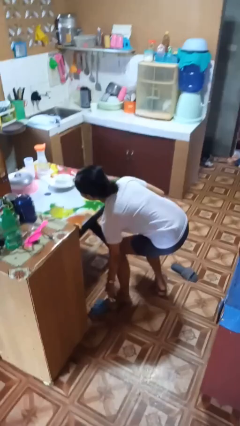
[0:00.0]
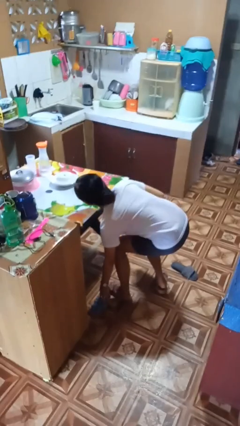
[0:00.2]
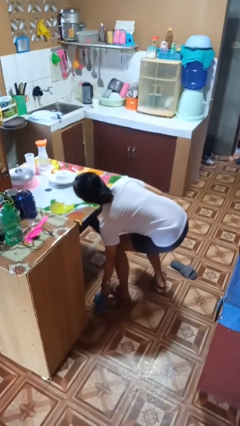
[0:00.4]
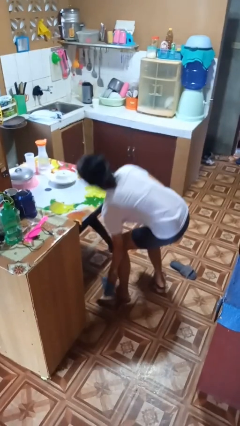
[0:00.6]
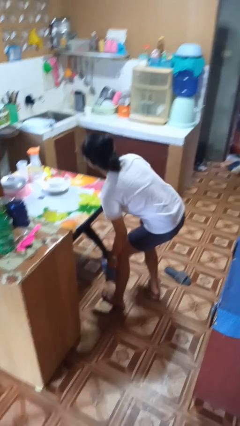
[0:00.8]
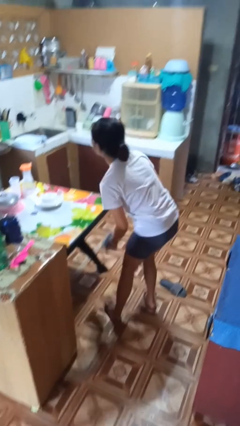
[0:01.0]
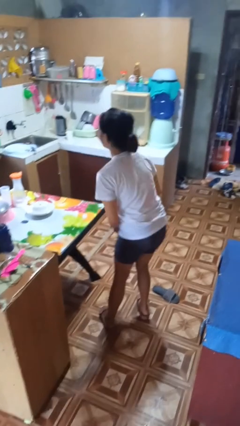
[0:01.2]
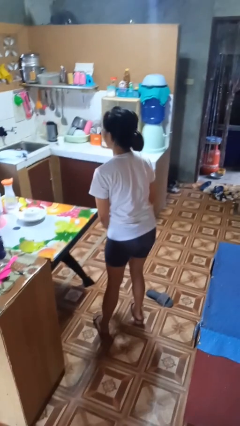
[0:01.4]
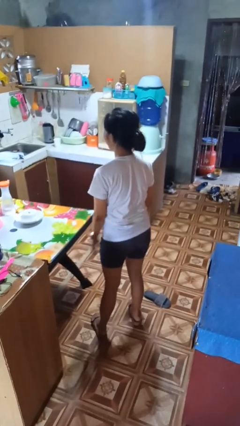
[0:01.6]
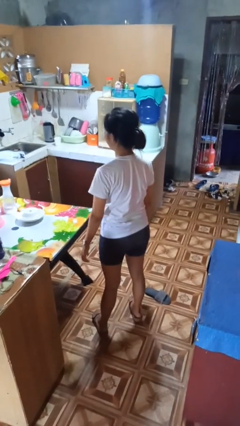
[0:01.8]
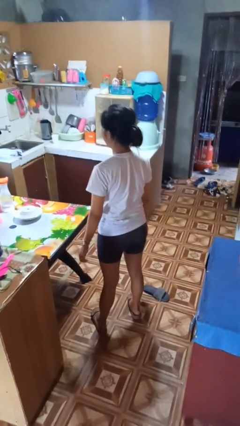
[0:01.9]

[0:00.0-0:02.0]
person picks up object from table

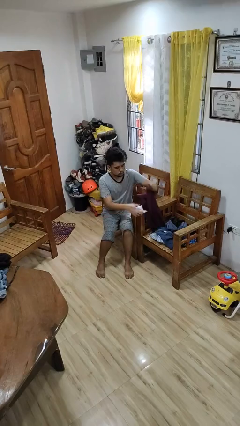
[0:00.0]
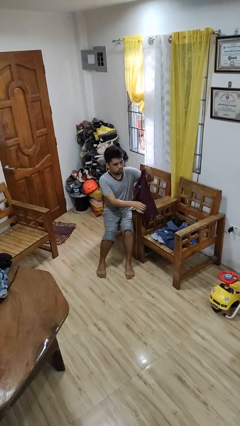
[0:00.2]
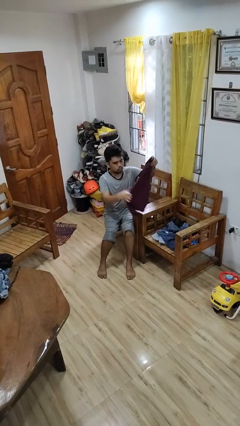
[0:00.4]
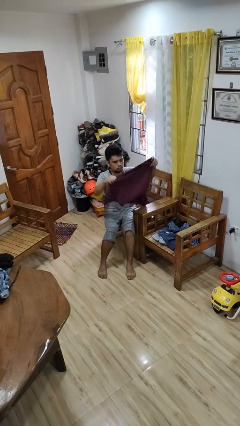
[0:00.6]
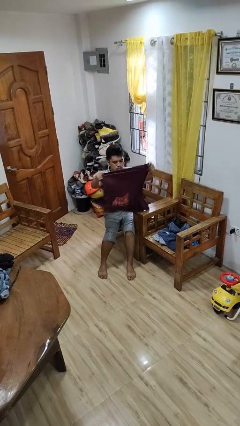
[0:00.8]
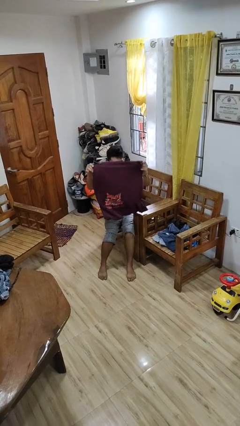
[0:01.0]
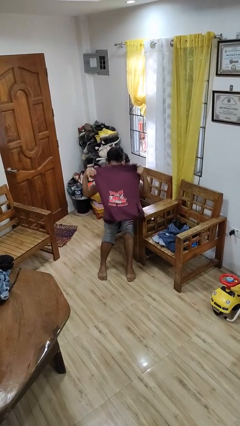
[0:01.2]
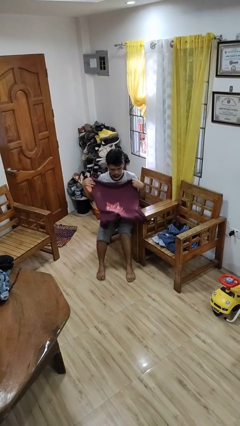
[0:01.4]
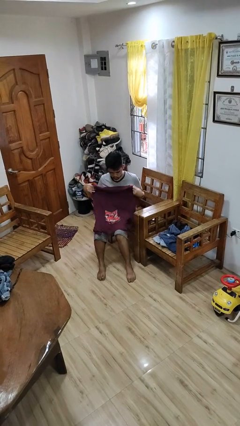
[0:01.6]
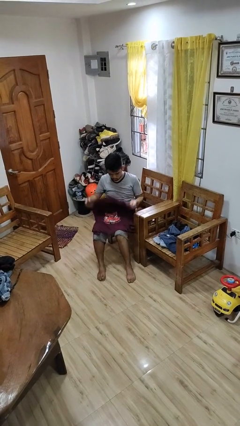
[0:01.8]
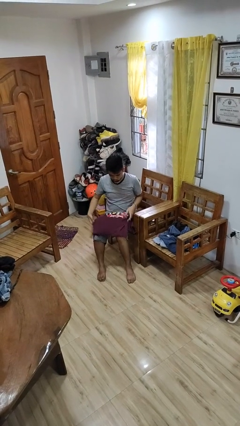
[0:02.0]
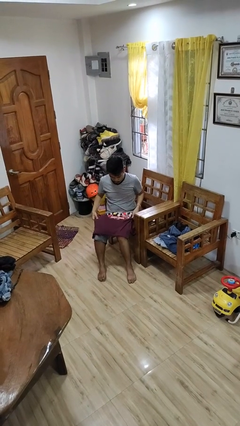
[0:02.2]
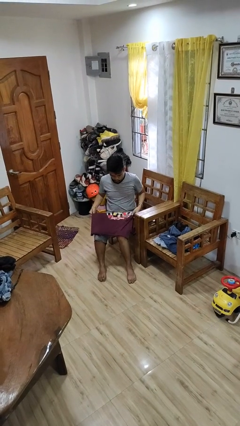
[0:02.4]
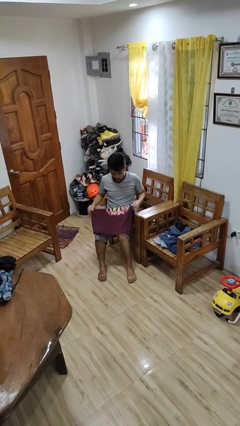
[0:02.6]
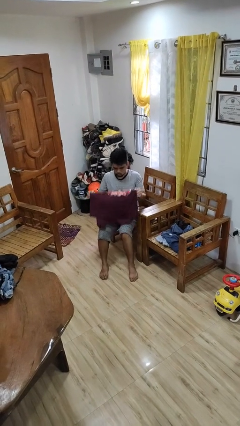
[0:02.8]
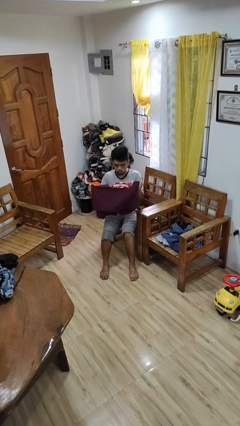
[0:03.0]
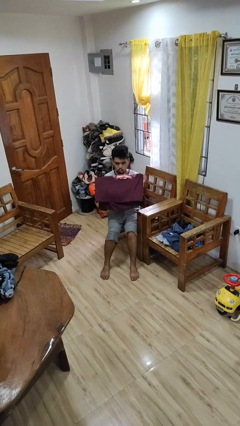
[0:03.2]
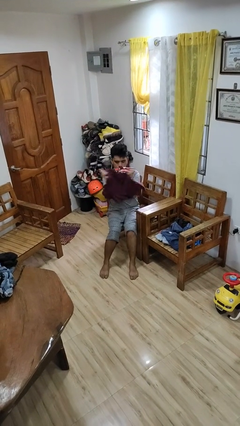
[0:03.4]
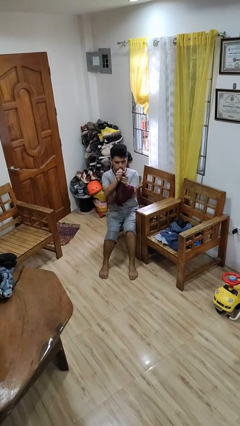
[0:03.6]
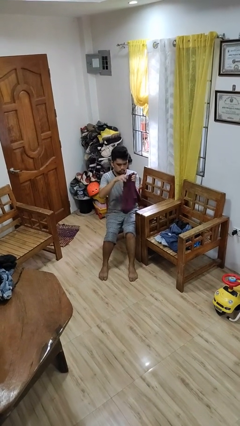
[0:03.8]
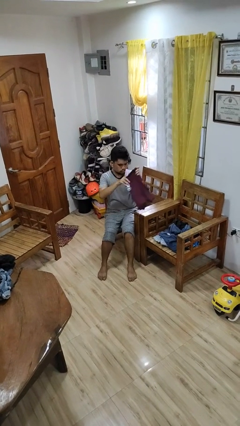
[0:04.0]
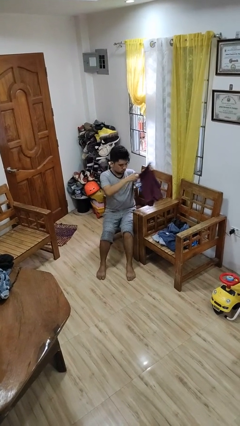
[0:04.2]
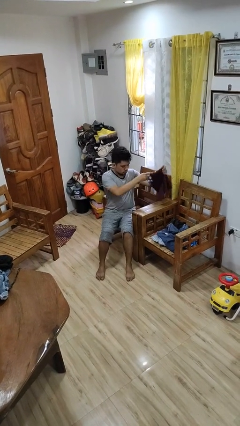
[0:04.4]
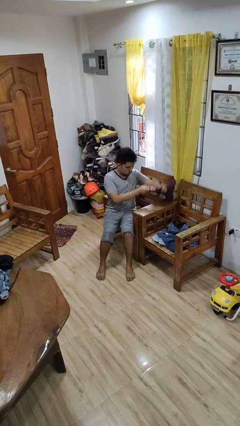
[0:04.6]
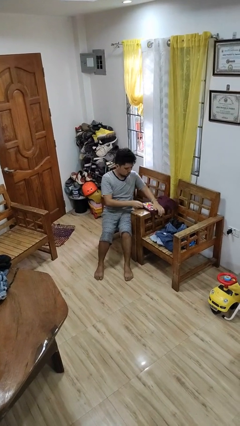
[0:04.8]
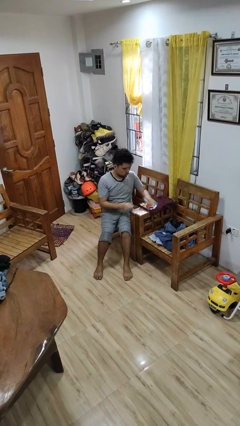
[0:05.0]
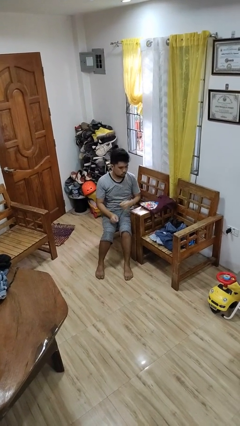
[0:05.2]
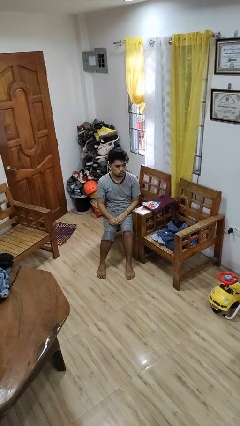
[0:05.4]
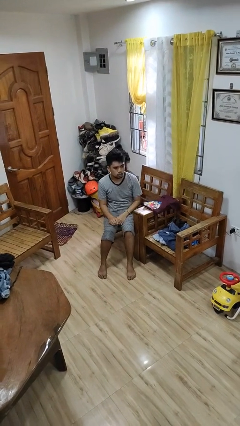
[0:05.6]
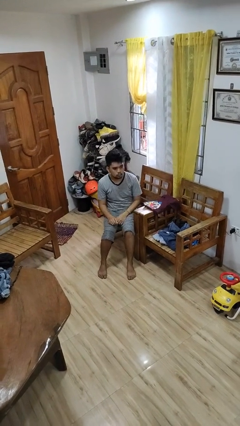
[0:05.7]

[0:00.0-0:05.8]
person folds shirt

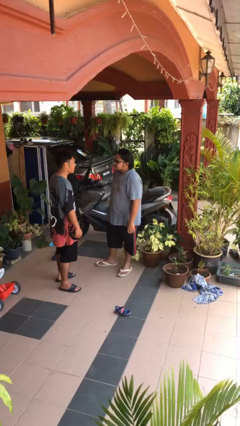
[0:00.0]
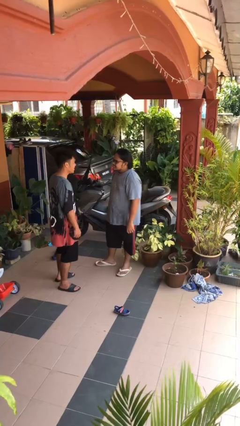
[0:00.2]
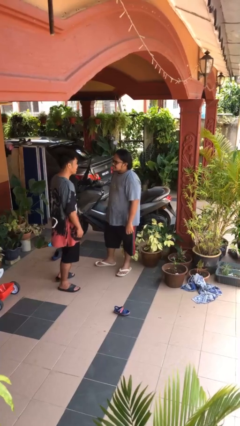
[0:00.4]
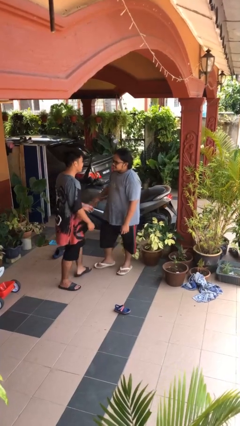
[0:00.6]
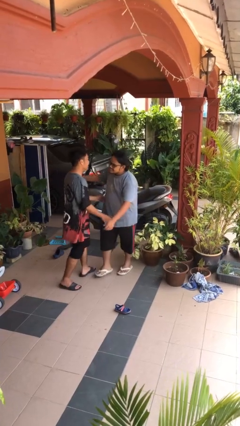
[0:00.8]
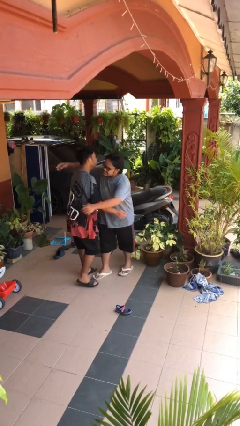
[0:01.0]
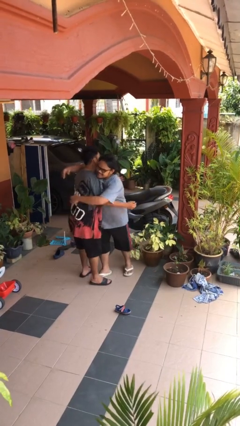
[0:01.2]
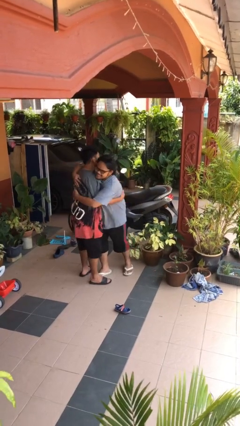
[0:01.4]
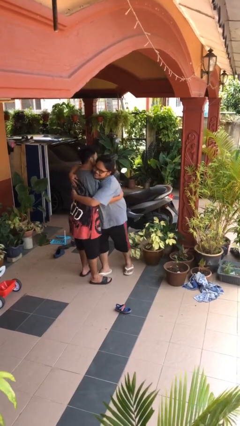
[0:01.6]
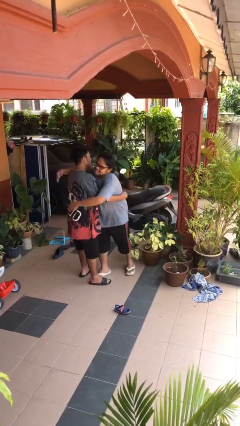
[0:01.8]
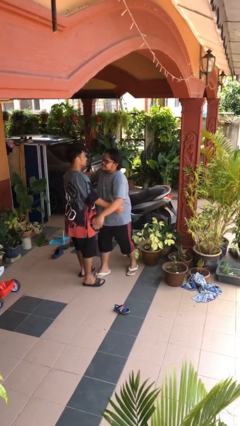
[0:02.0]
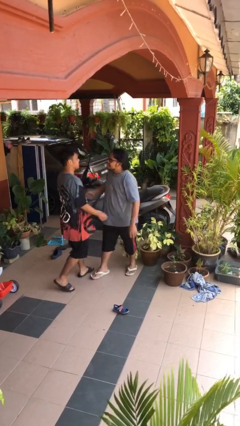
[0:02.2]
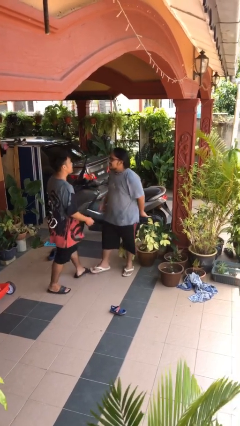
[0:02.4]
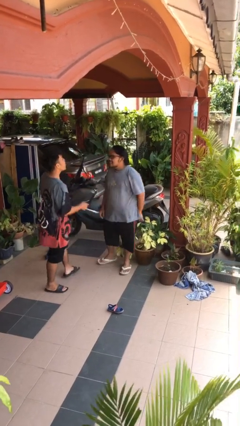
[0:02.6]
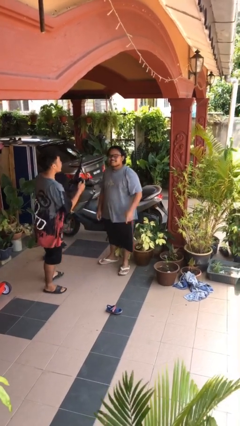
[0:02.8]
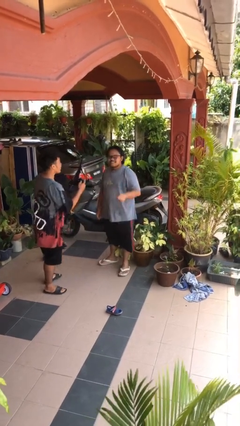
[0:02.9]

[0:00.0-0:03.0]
person embraces person

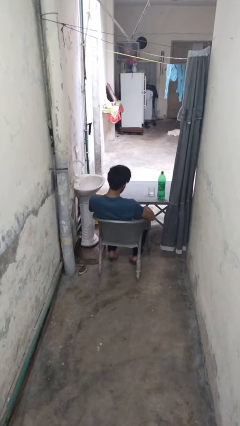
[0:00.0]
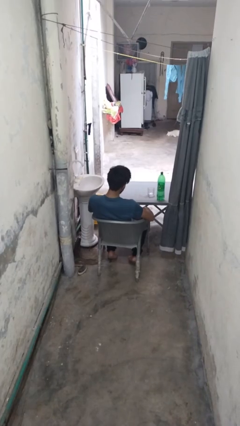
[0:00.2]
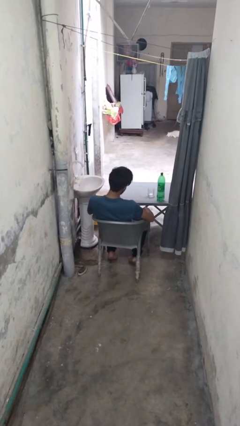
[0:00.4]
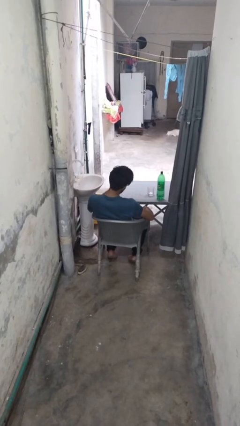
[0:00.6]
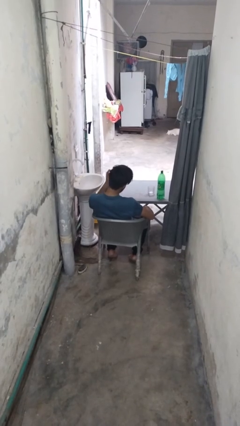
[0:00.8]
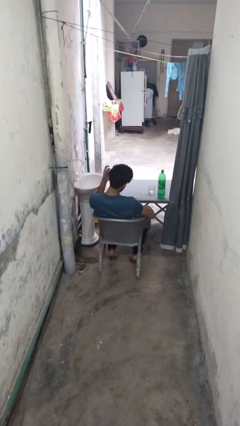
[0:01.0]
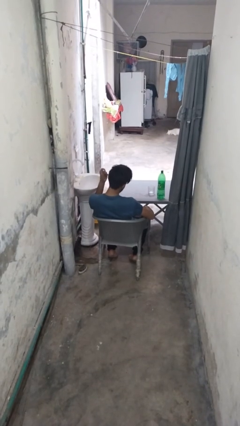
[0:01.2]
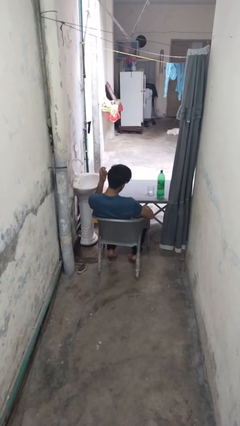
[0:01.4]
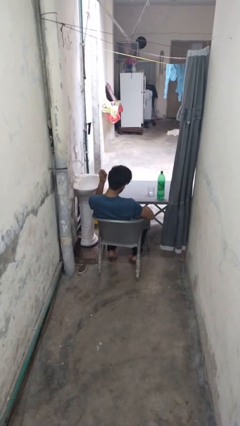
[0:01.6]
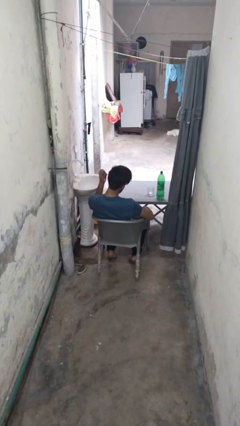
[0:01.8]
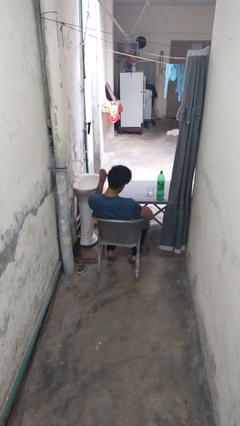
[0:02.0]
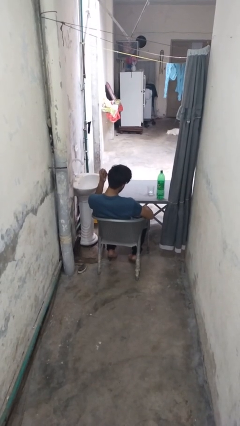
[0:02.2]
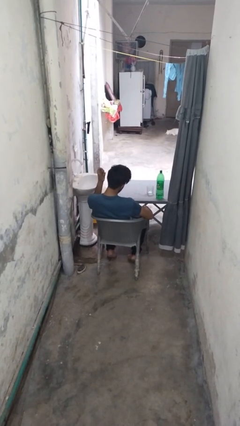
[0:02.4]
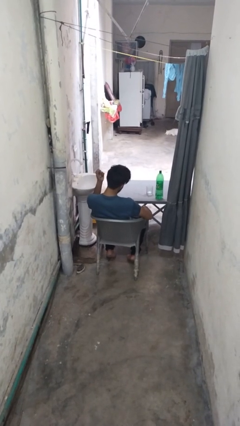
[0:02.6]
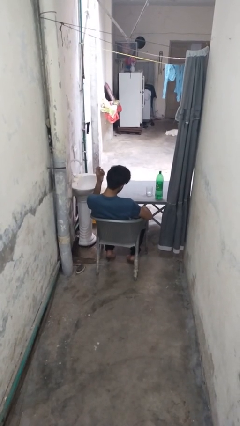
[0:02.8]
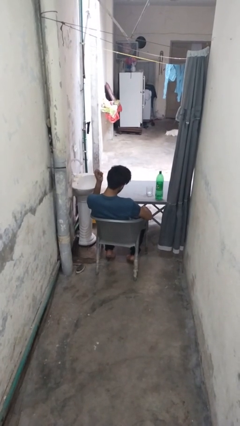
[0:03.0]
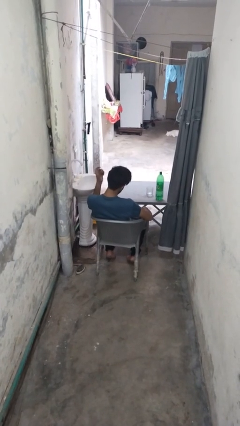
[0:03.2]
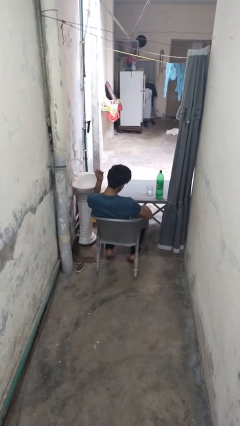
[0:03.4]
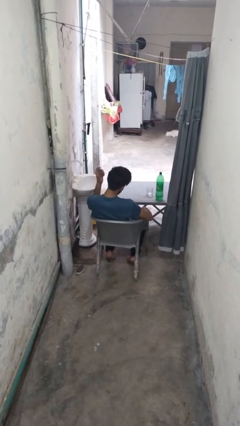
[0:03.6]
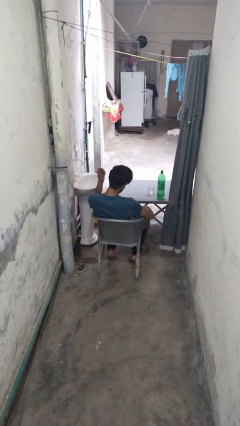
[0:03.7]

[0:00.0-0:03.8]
person snaps fingers

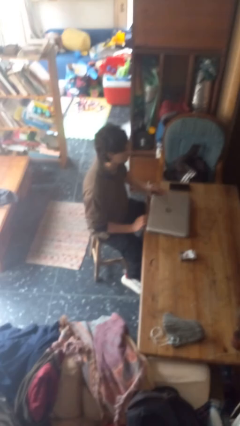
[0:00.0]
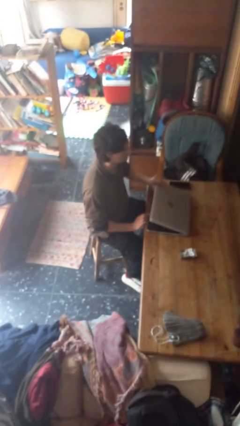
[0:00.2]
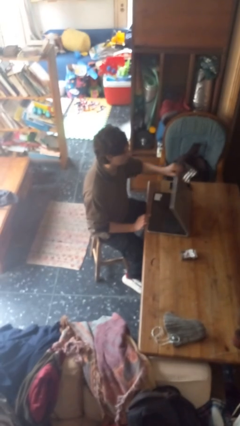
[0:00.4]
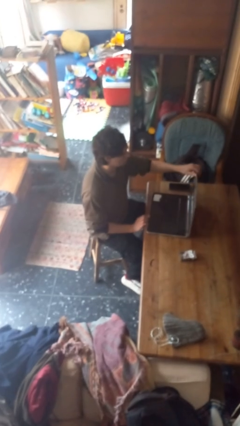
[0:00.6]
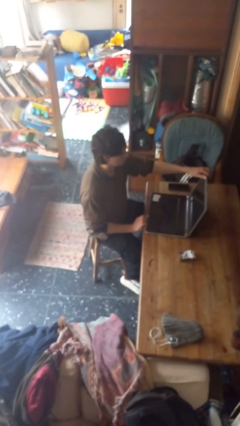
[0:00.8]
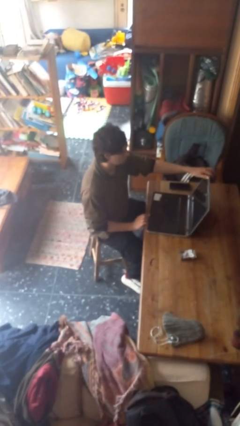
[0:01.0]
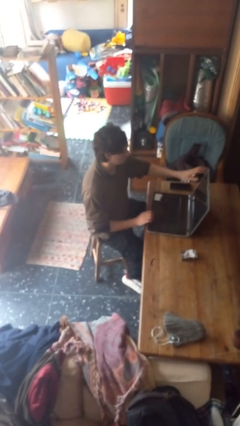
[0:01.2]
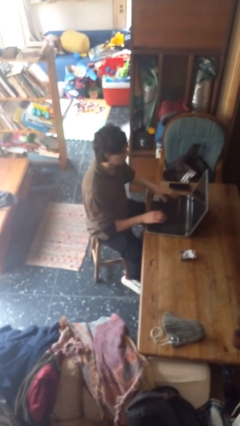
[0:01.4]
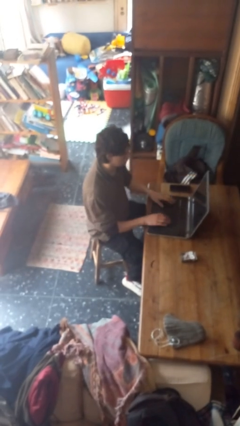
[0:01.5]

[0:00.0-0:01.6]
person opens laptop

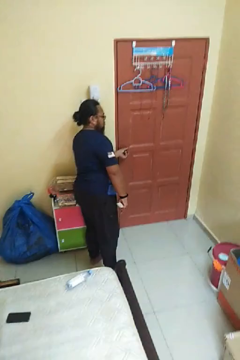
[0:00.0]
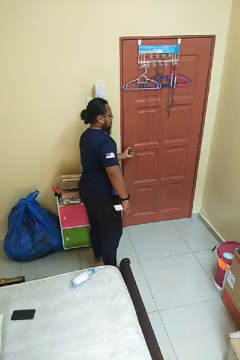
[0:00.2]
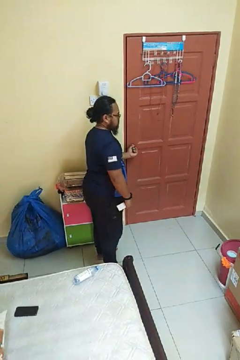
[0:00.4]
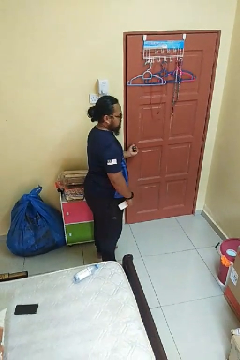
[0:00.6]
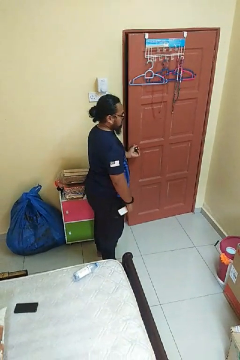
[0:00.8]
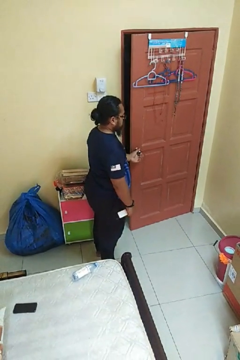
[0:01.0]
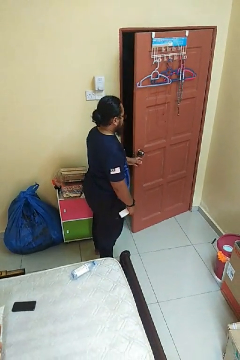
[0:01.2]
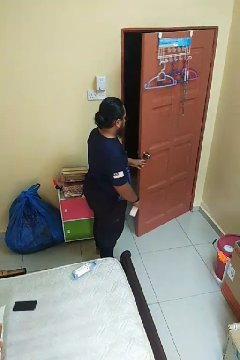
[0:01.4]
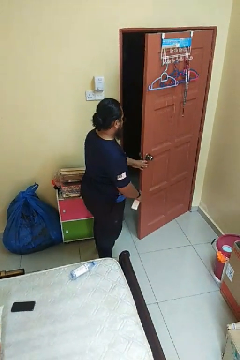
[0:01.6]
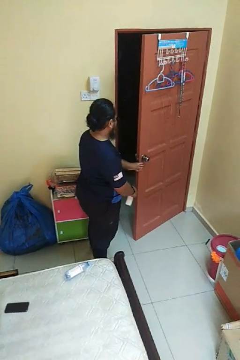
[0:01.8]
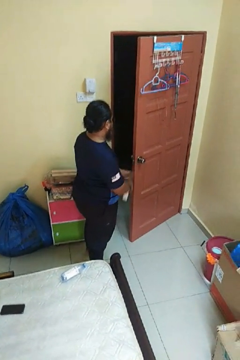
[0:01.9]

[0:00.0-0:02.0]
person opens facility door
